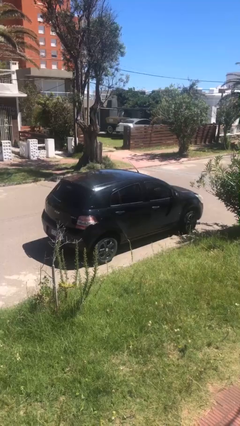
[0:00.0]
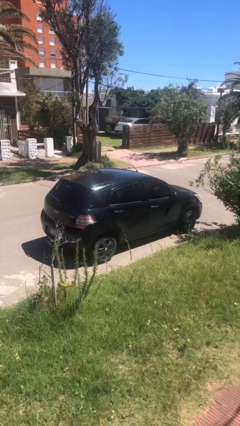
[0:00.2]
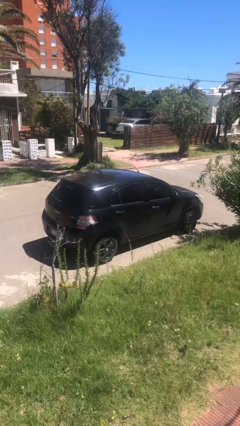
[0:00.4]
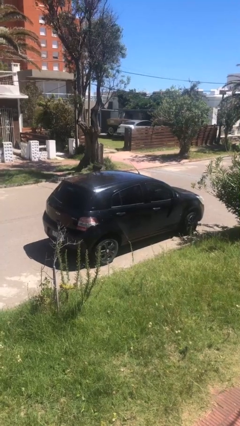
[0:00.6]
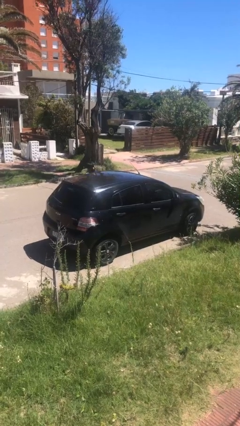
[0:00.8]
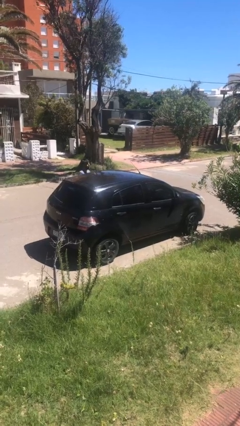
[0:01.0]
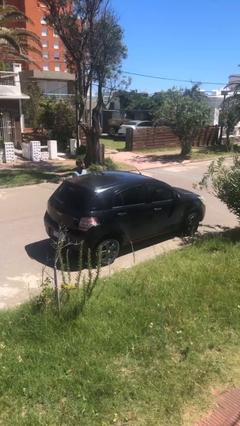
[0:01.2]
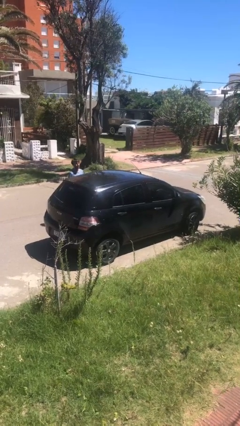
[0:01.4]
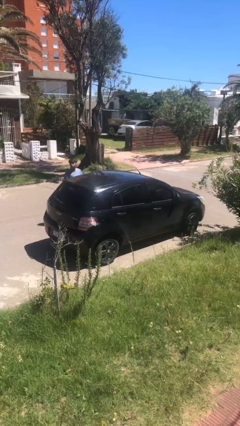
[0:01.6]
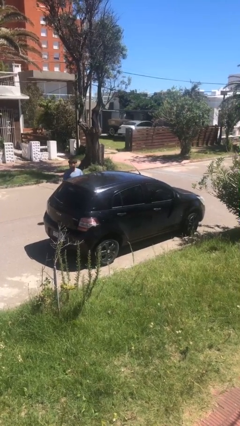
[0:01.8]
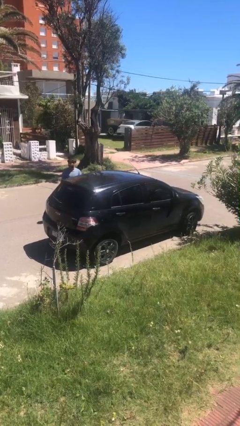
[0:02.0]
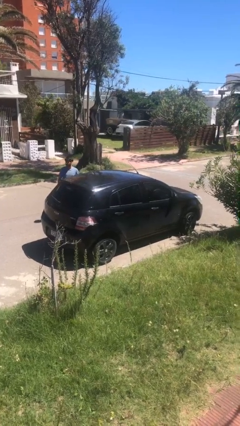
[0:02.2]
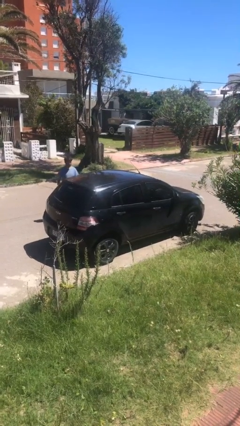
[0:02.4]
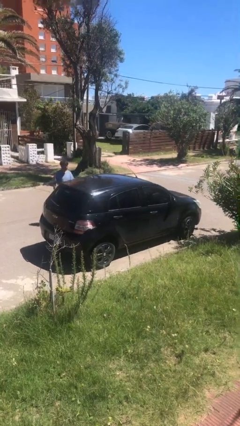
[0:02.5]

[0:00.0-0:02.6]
car drops off person

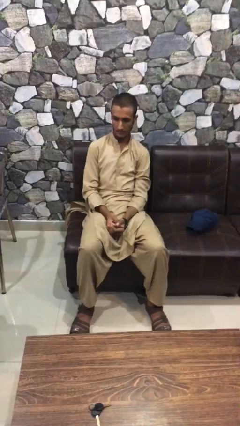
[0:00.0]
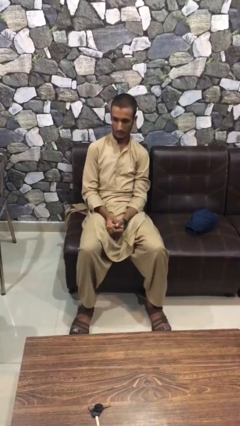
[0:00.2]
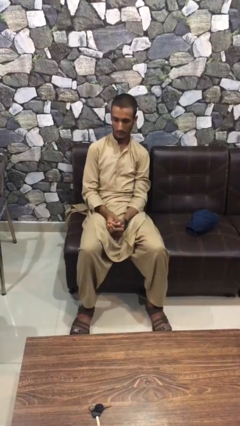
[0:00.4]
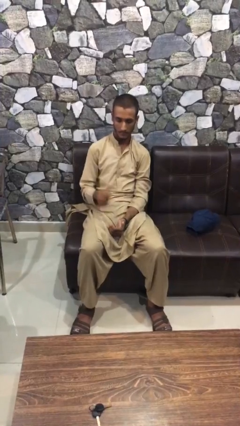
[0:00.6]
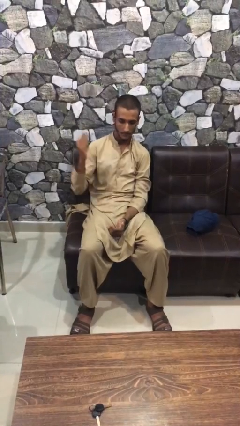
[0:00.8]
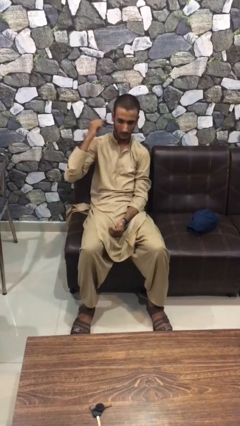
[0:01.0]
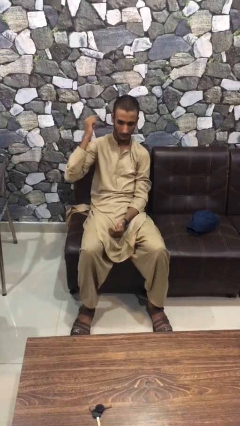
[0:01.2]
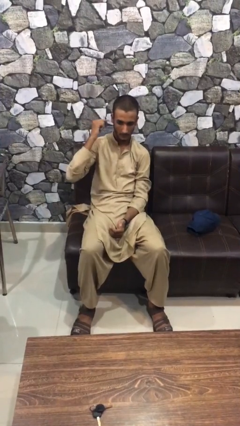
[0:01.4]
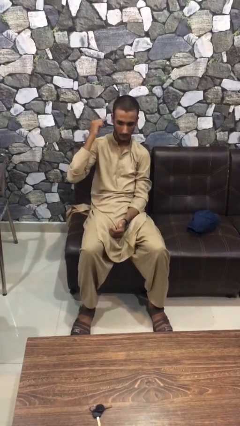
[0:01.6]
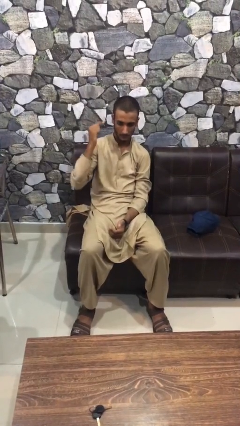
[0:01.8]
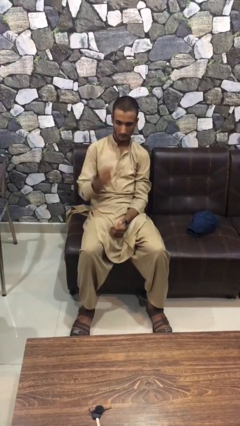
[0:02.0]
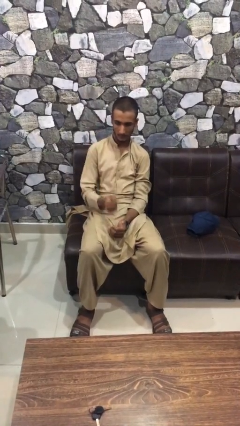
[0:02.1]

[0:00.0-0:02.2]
person gestures listen closely

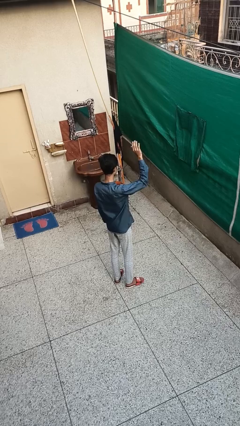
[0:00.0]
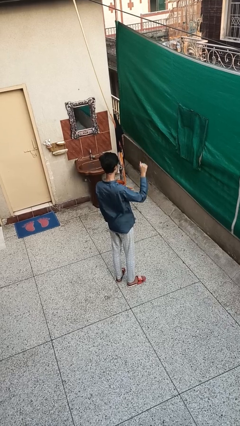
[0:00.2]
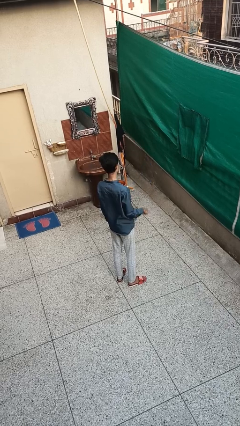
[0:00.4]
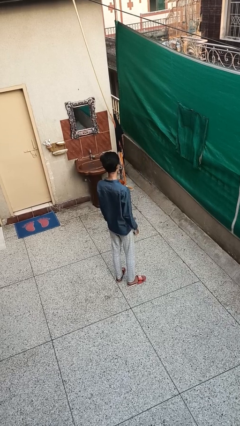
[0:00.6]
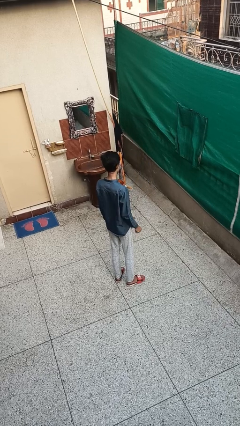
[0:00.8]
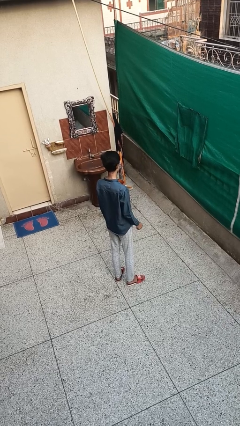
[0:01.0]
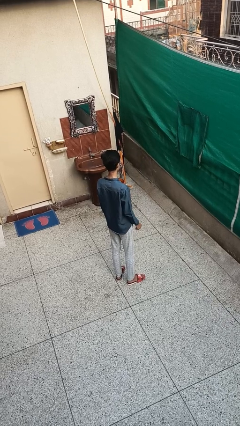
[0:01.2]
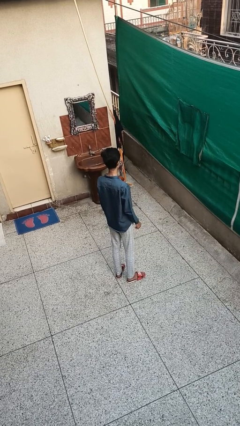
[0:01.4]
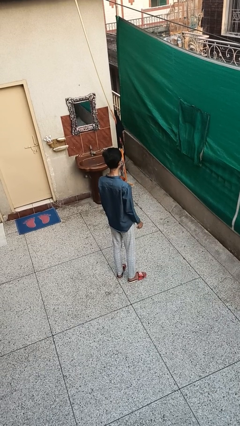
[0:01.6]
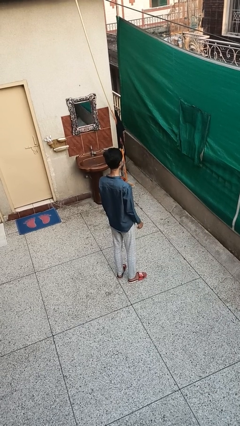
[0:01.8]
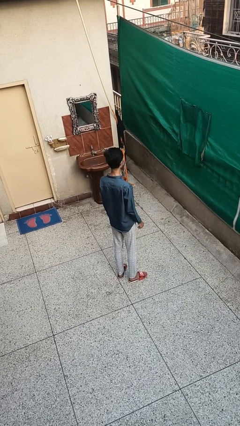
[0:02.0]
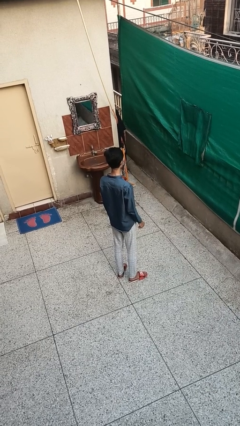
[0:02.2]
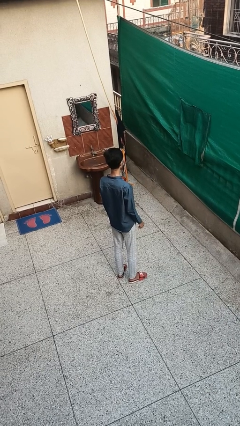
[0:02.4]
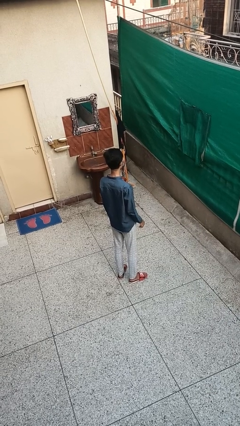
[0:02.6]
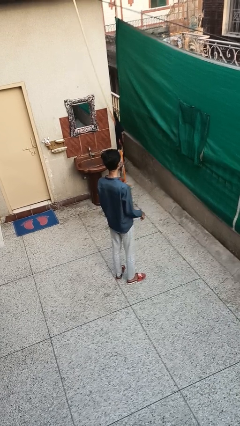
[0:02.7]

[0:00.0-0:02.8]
person gestures lower hand

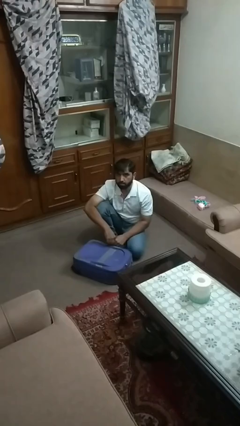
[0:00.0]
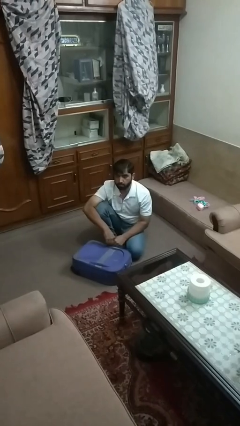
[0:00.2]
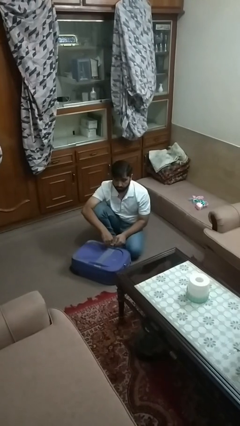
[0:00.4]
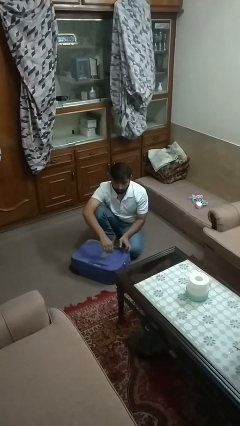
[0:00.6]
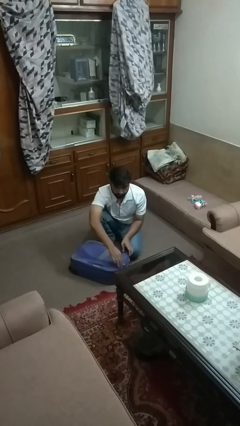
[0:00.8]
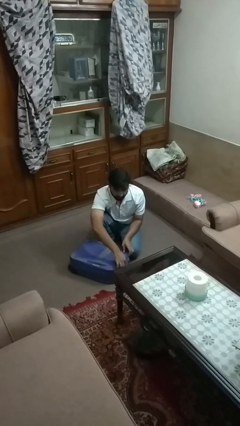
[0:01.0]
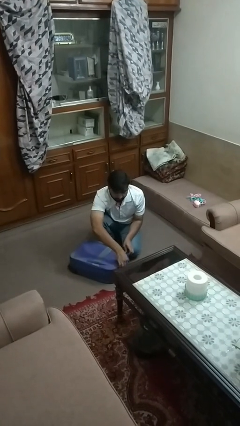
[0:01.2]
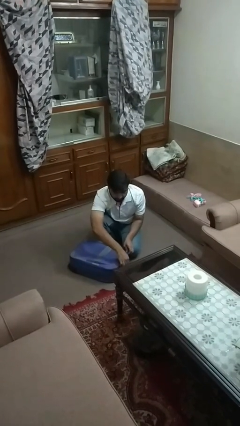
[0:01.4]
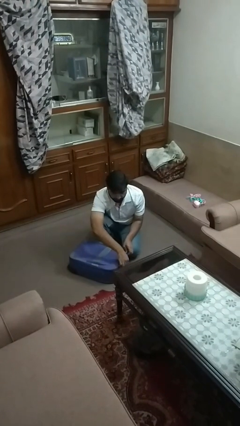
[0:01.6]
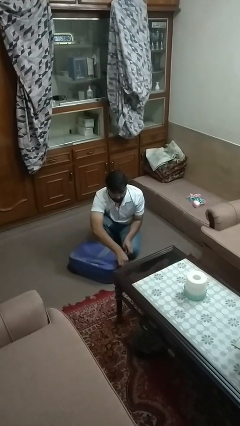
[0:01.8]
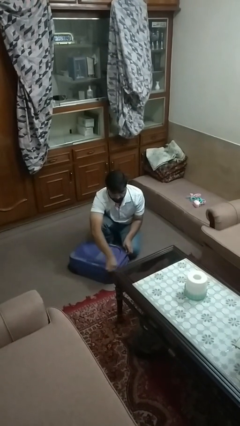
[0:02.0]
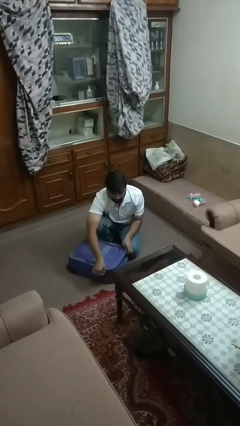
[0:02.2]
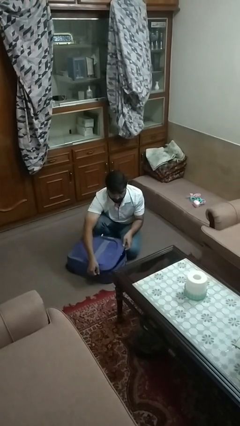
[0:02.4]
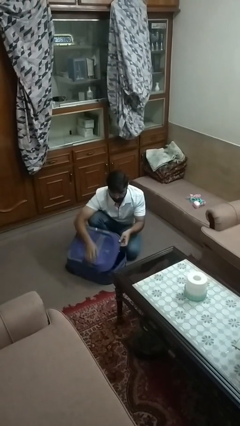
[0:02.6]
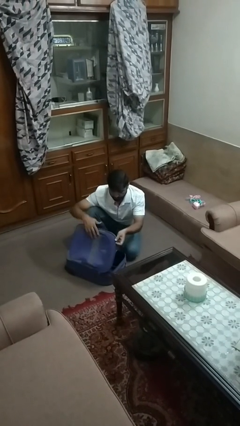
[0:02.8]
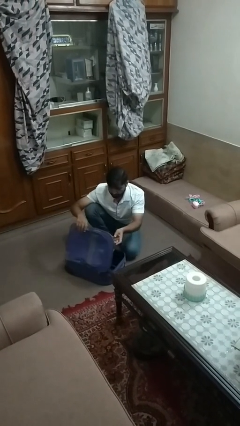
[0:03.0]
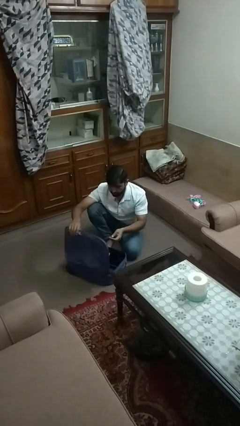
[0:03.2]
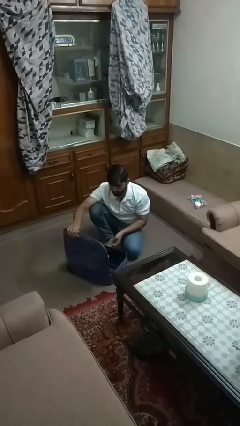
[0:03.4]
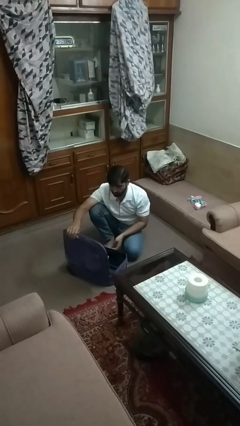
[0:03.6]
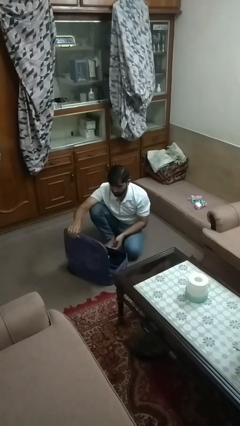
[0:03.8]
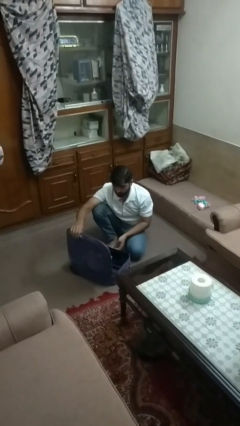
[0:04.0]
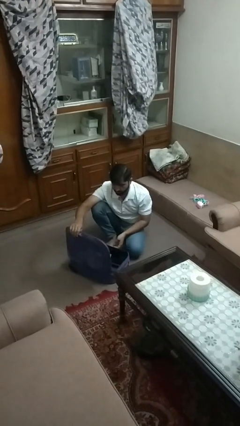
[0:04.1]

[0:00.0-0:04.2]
person opens suitcase

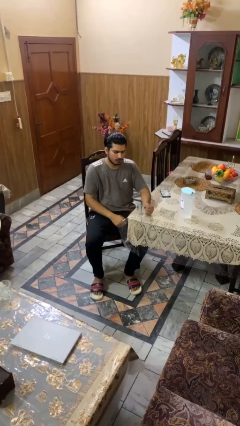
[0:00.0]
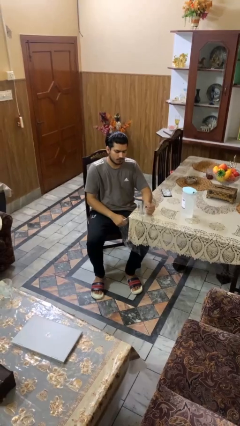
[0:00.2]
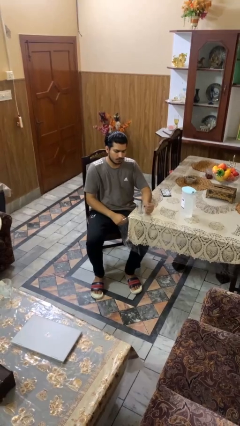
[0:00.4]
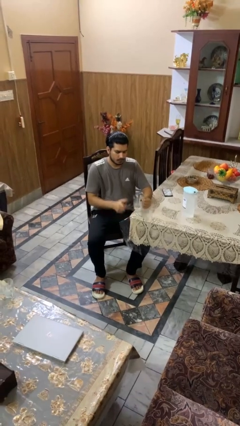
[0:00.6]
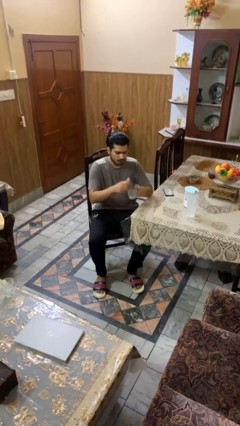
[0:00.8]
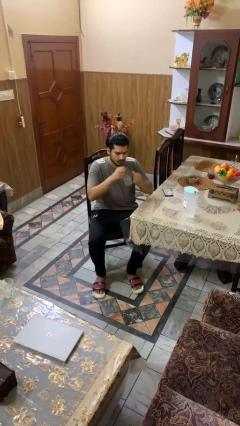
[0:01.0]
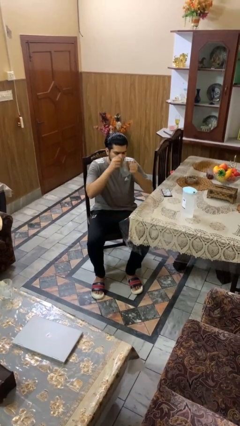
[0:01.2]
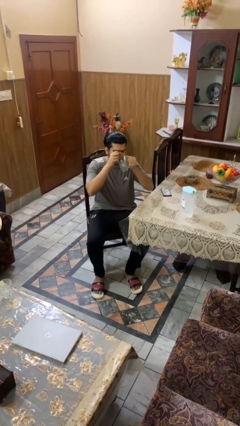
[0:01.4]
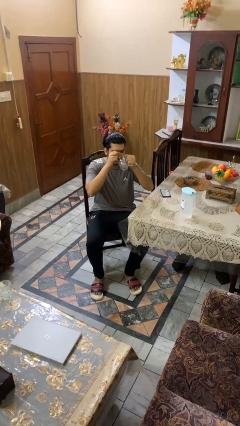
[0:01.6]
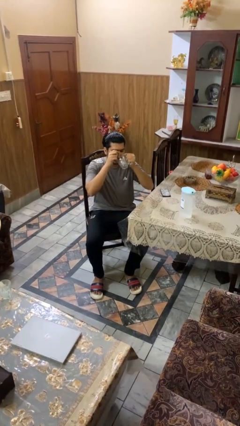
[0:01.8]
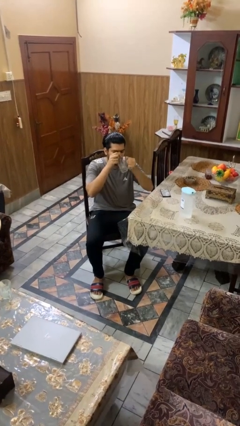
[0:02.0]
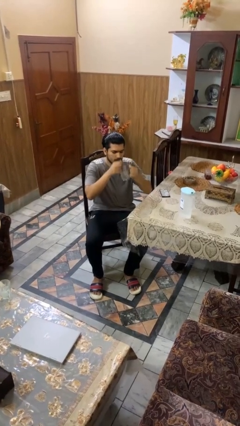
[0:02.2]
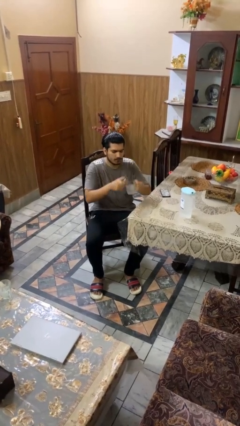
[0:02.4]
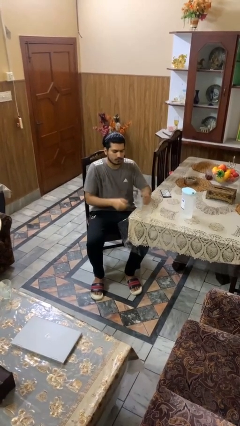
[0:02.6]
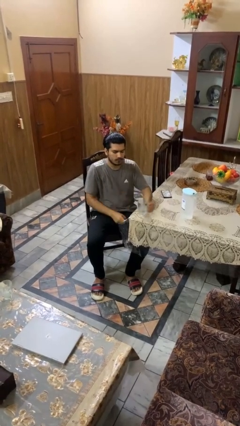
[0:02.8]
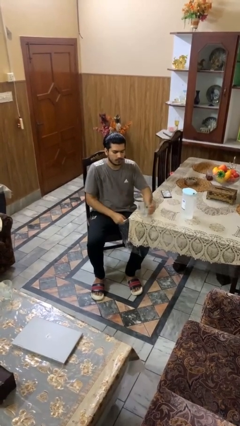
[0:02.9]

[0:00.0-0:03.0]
person drinks from mug

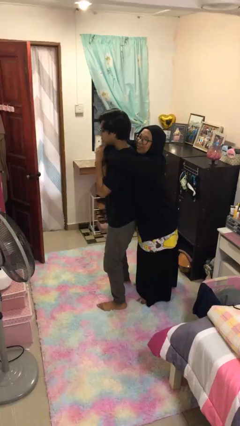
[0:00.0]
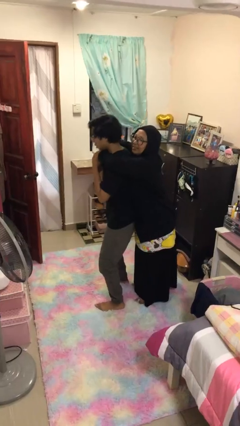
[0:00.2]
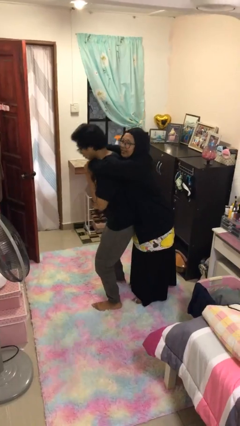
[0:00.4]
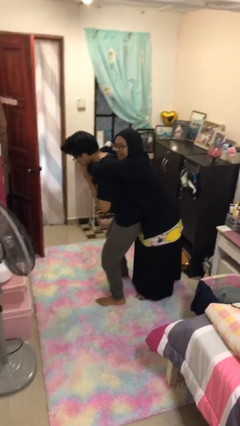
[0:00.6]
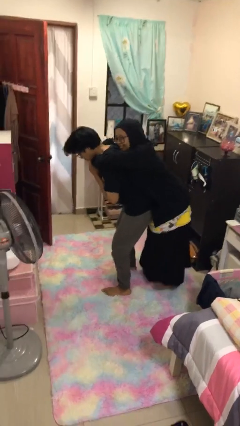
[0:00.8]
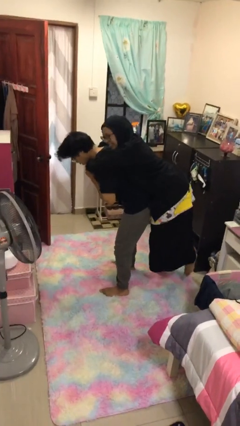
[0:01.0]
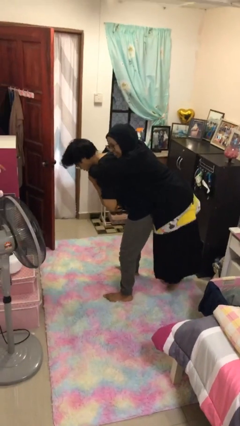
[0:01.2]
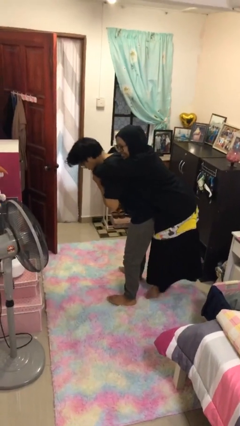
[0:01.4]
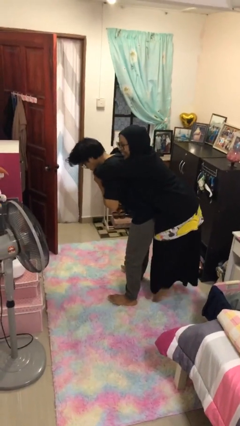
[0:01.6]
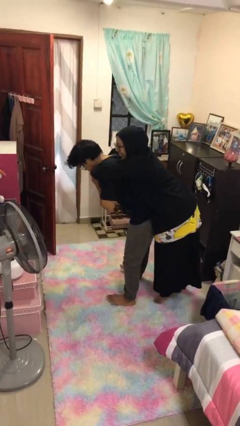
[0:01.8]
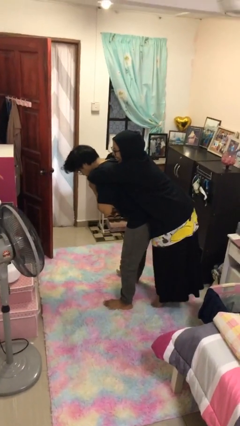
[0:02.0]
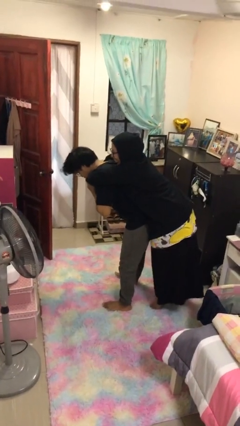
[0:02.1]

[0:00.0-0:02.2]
person picks up person

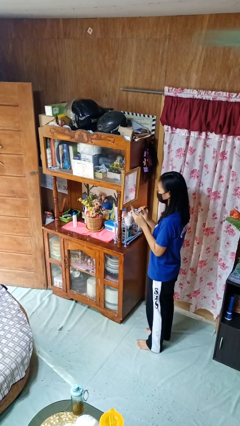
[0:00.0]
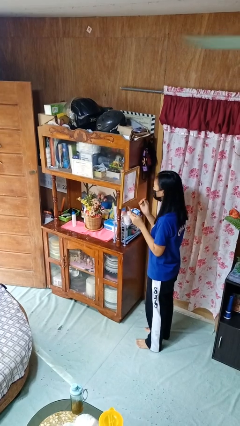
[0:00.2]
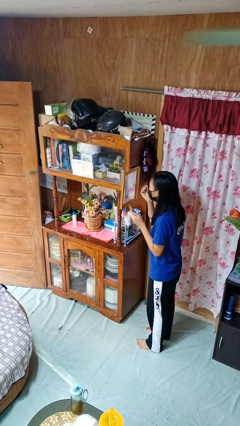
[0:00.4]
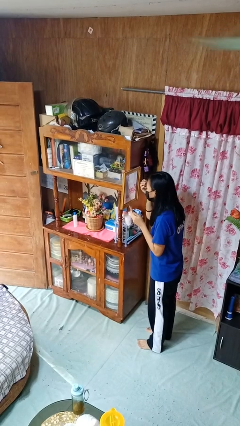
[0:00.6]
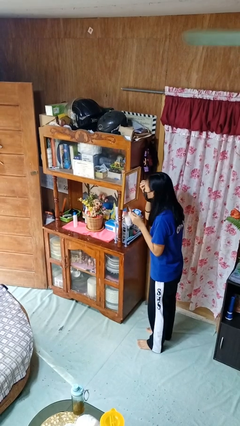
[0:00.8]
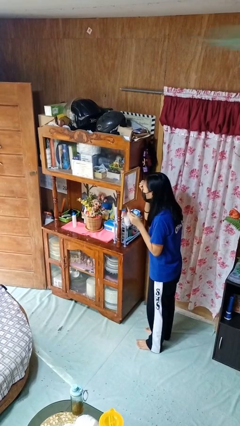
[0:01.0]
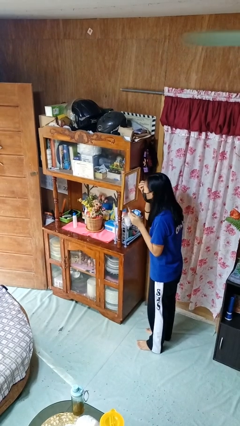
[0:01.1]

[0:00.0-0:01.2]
person applies eye makeup
